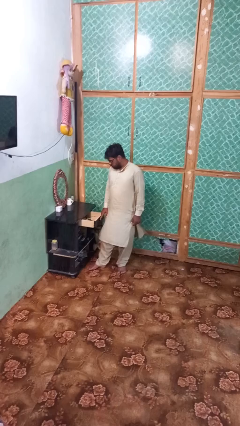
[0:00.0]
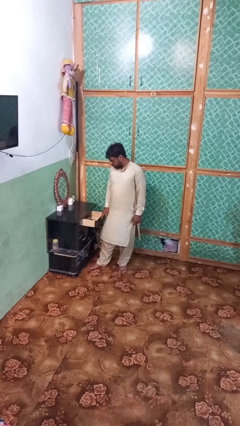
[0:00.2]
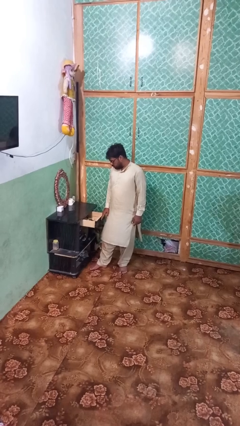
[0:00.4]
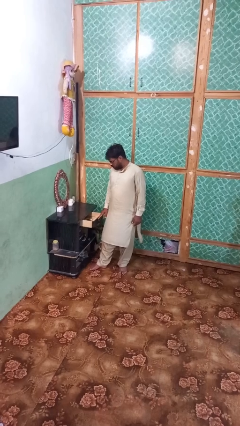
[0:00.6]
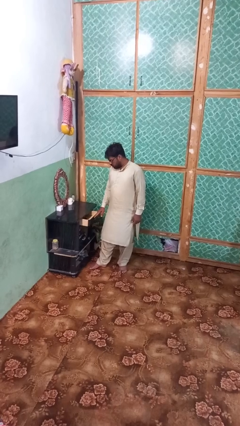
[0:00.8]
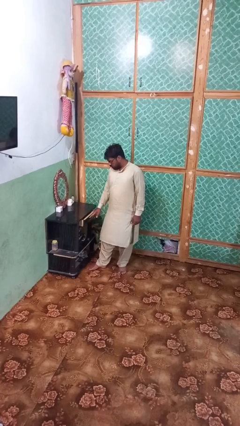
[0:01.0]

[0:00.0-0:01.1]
person closes dresser drawer

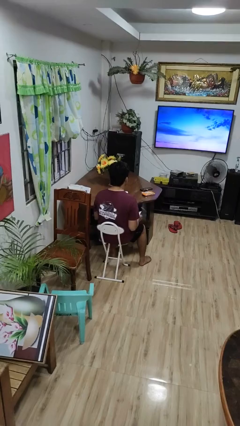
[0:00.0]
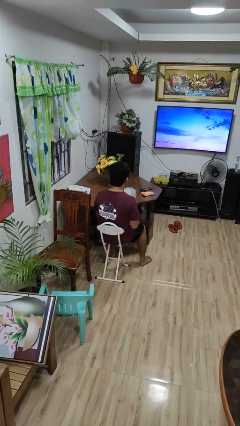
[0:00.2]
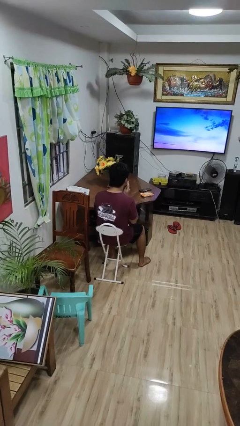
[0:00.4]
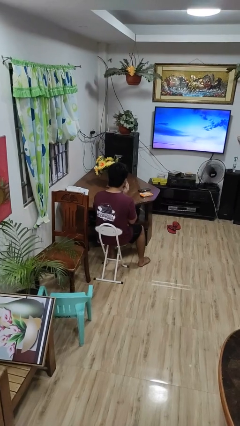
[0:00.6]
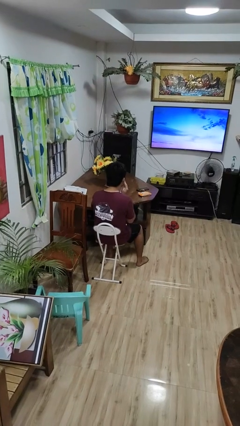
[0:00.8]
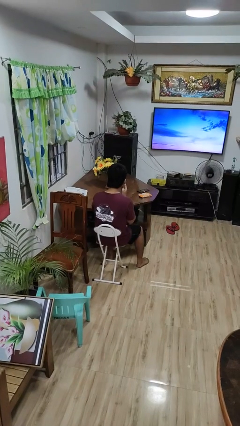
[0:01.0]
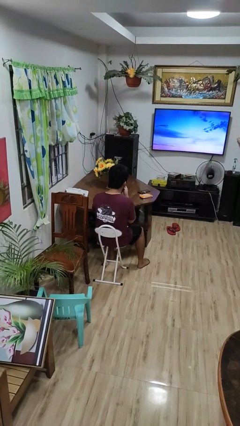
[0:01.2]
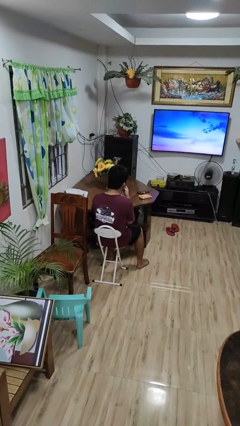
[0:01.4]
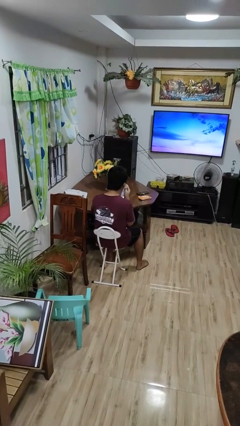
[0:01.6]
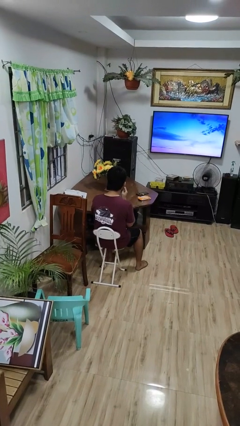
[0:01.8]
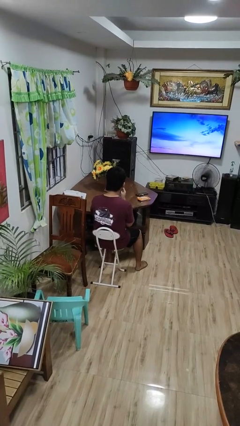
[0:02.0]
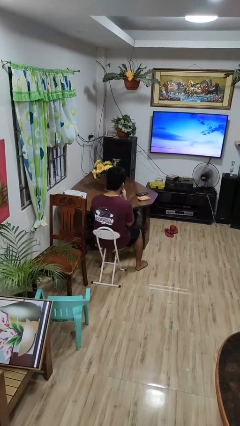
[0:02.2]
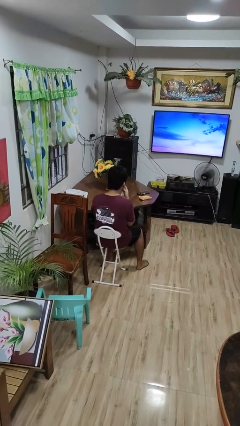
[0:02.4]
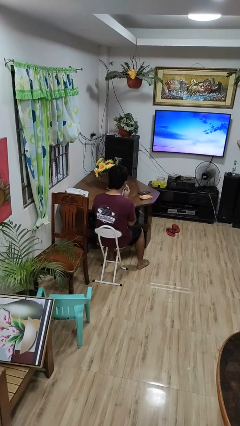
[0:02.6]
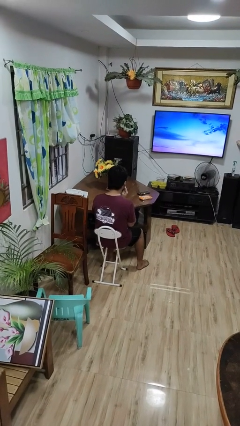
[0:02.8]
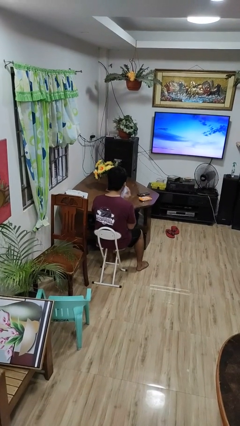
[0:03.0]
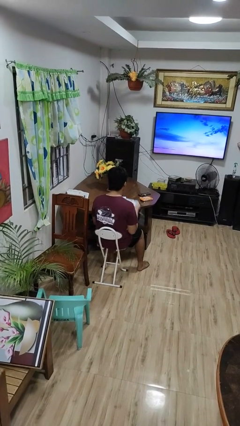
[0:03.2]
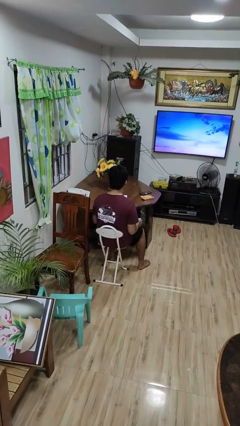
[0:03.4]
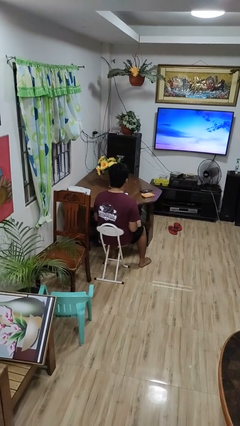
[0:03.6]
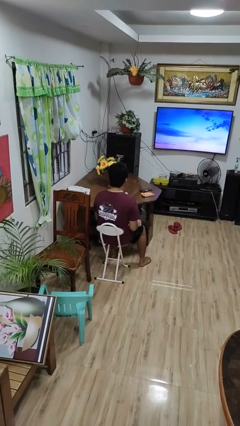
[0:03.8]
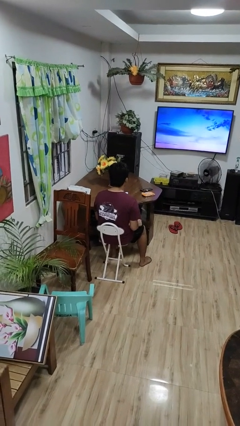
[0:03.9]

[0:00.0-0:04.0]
person wipes mouth with napkin

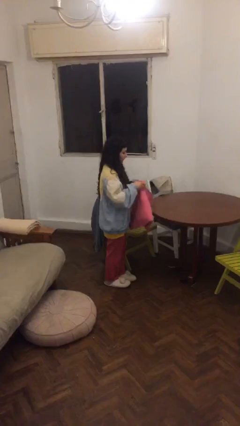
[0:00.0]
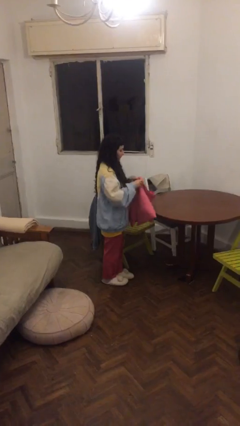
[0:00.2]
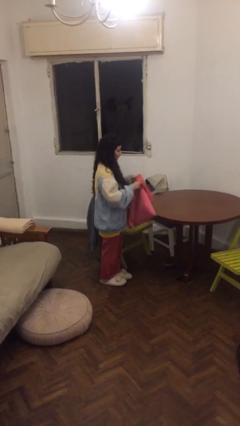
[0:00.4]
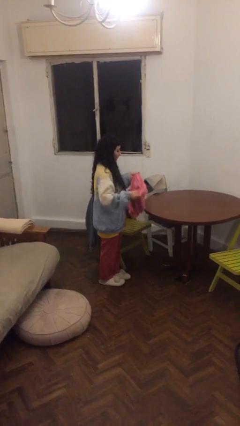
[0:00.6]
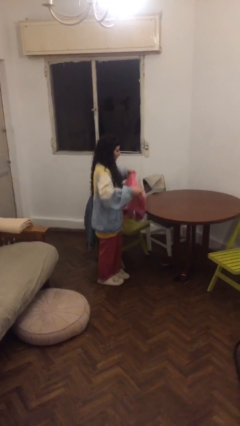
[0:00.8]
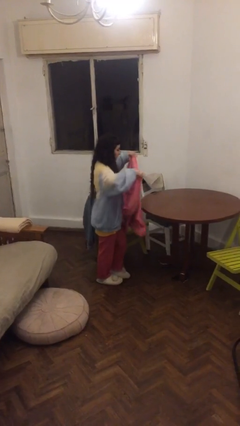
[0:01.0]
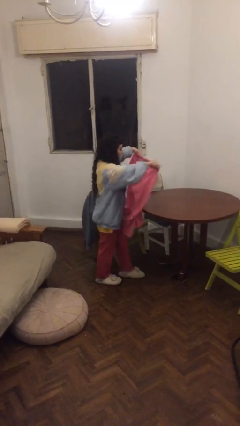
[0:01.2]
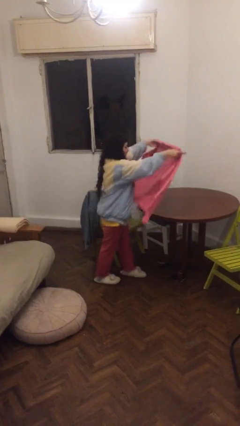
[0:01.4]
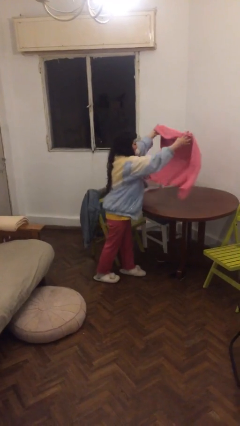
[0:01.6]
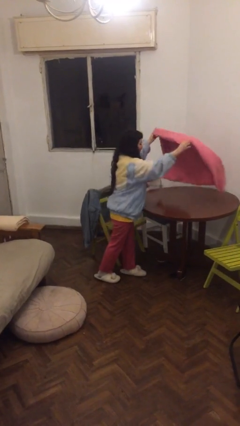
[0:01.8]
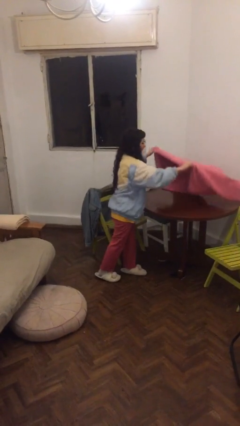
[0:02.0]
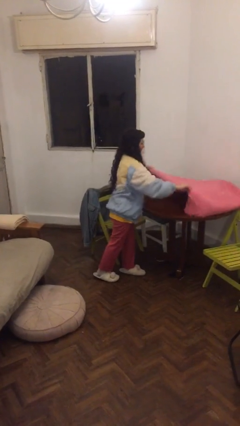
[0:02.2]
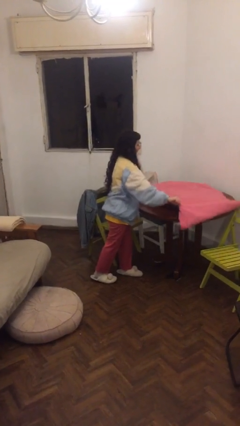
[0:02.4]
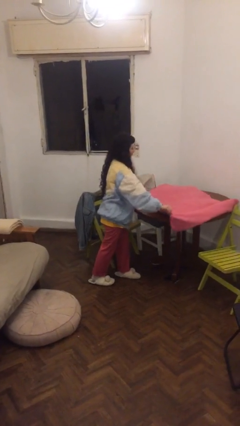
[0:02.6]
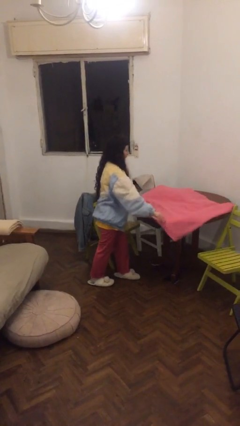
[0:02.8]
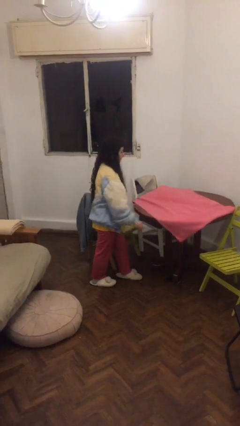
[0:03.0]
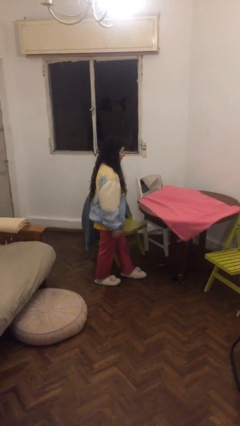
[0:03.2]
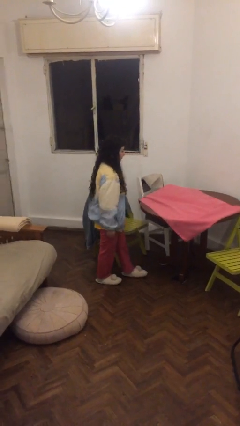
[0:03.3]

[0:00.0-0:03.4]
person spreads tablecloth

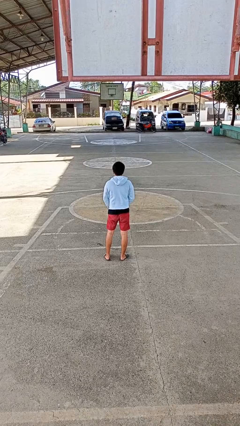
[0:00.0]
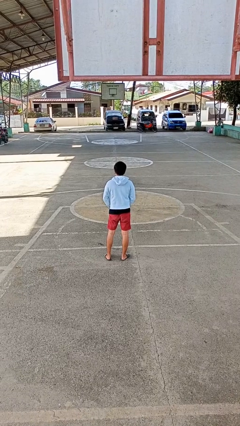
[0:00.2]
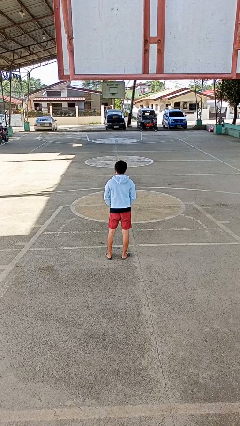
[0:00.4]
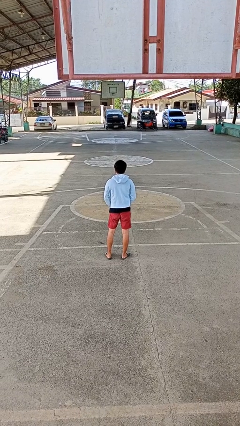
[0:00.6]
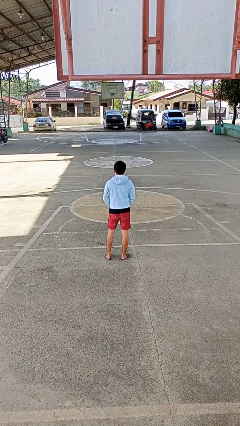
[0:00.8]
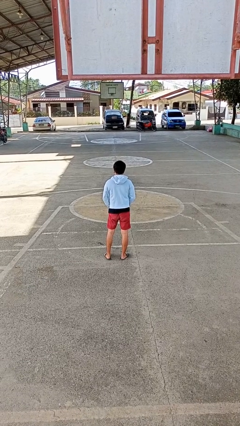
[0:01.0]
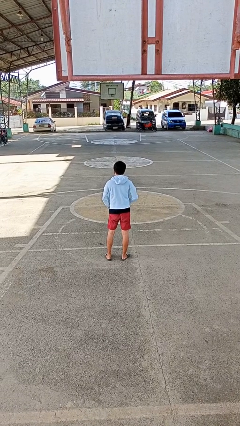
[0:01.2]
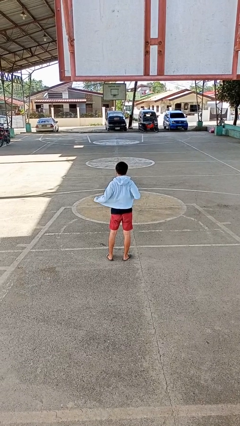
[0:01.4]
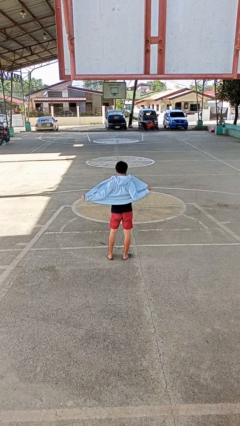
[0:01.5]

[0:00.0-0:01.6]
person unzips jacket

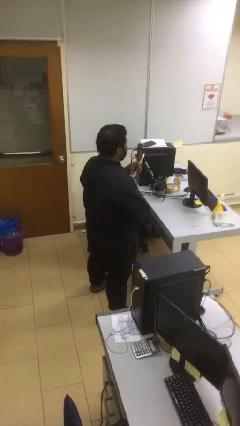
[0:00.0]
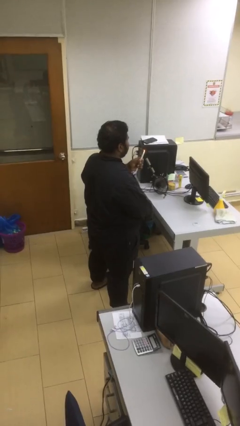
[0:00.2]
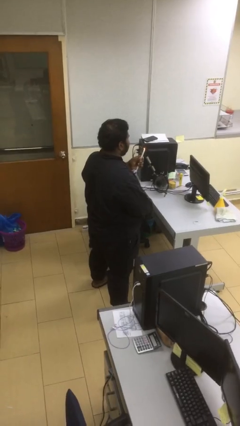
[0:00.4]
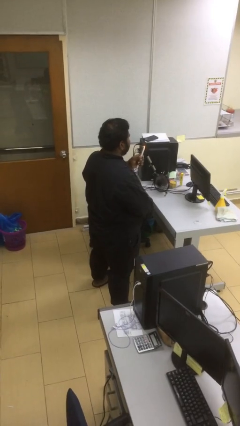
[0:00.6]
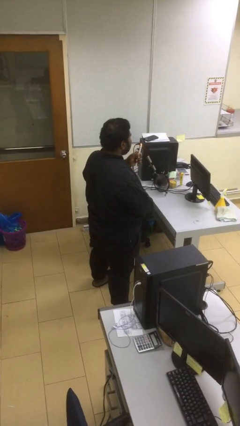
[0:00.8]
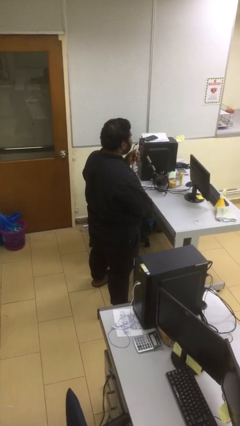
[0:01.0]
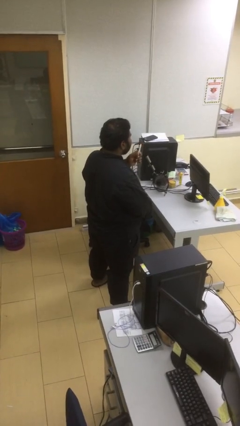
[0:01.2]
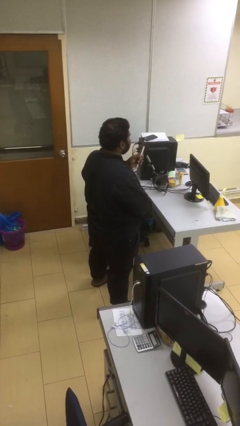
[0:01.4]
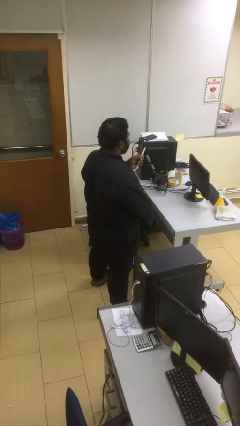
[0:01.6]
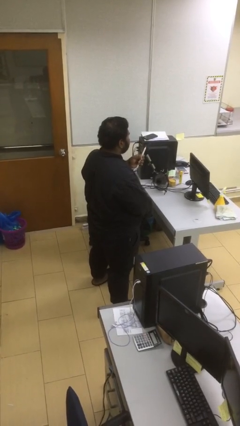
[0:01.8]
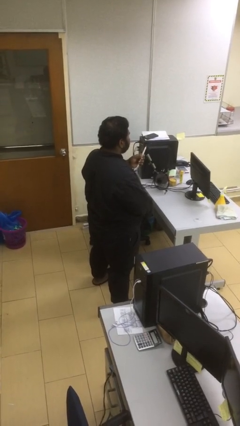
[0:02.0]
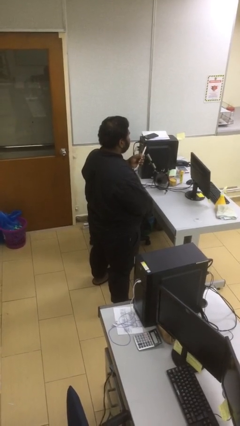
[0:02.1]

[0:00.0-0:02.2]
person extinguishes candle

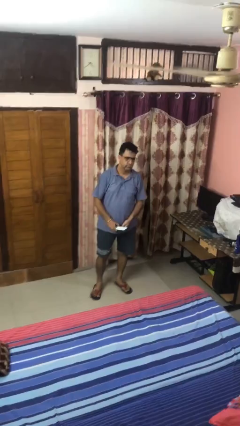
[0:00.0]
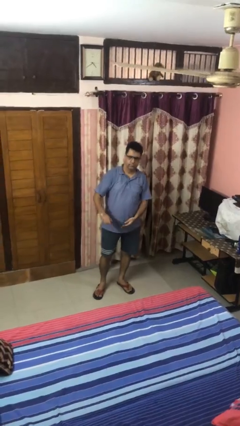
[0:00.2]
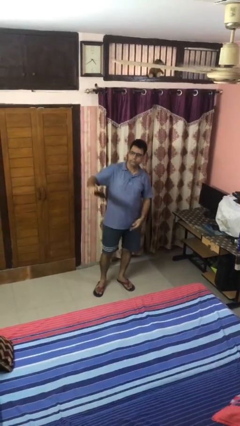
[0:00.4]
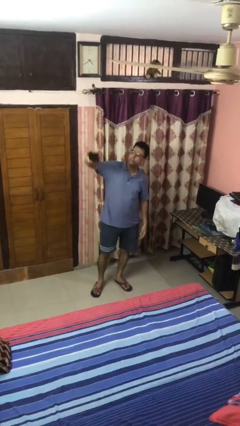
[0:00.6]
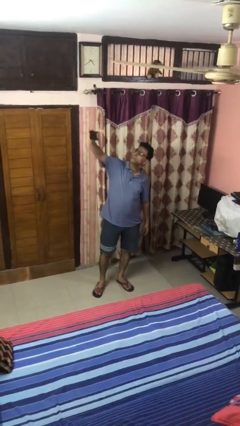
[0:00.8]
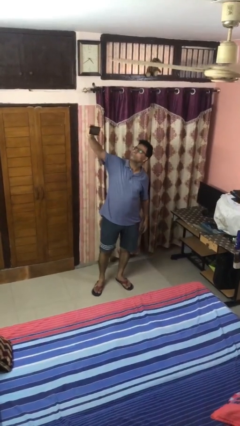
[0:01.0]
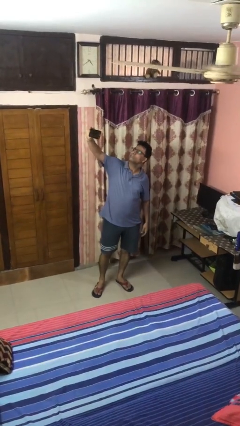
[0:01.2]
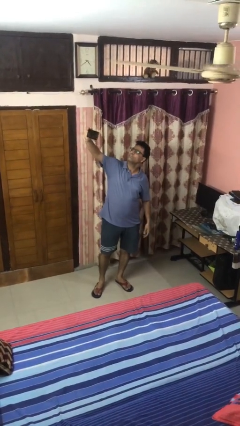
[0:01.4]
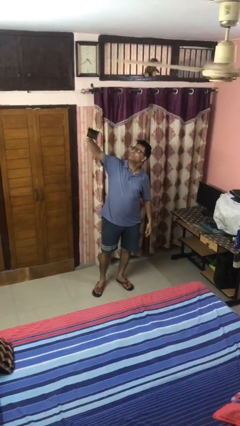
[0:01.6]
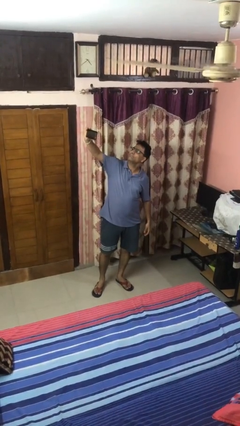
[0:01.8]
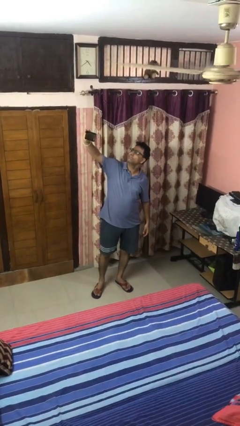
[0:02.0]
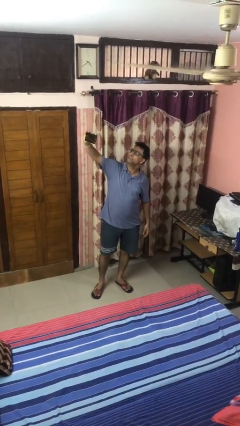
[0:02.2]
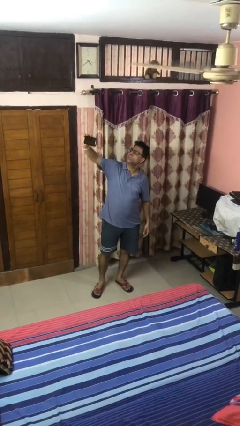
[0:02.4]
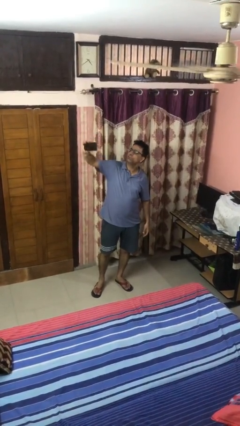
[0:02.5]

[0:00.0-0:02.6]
person takes selfie

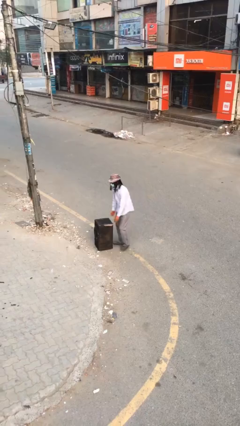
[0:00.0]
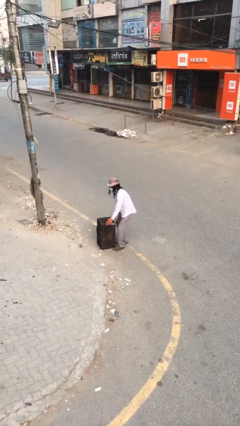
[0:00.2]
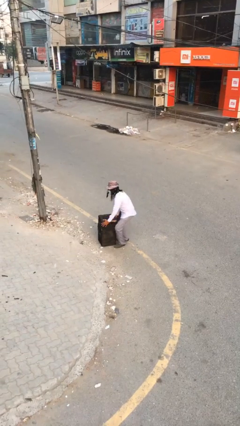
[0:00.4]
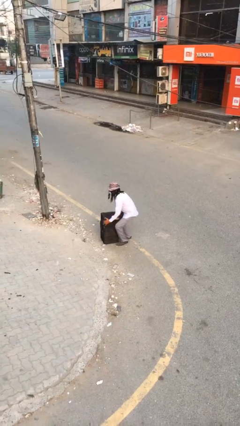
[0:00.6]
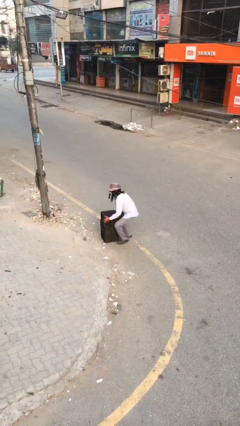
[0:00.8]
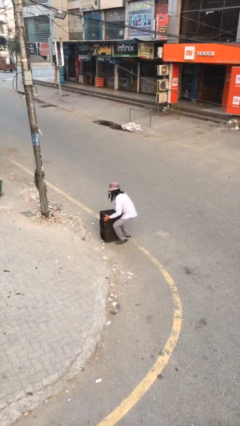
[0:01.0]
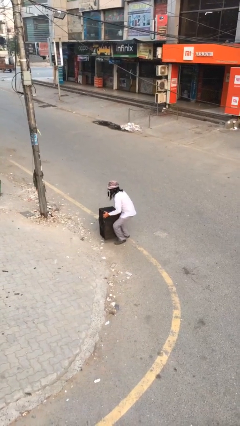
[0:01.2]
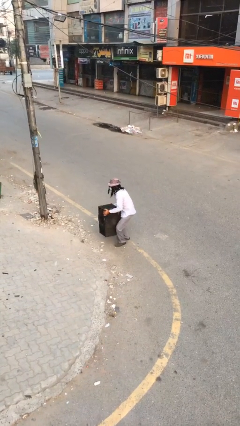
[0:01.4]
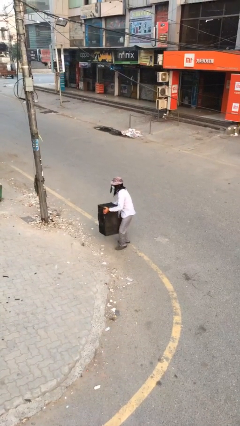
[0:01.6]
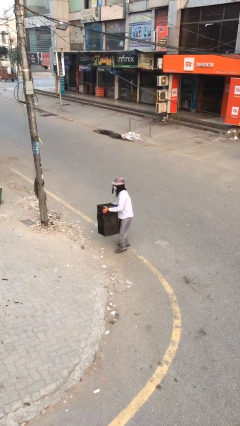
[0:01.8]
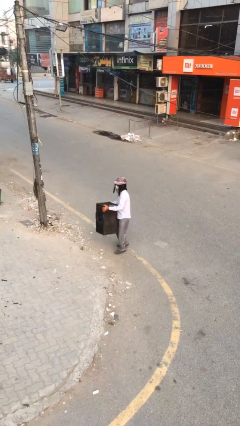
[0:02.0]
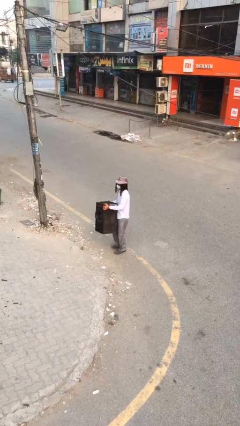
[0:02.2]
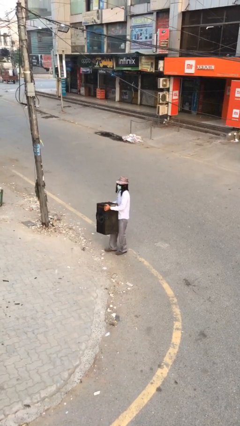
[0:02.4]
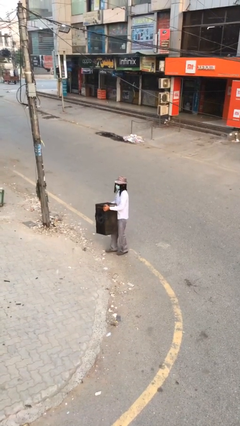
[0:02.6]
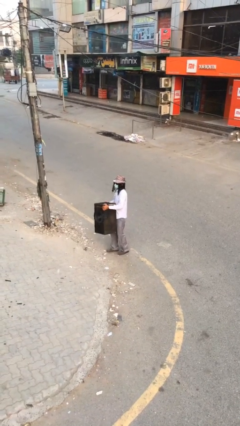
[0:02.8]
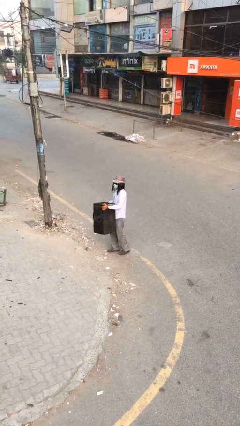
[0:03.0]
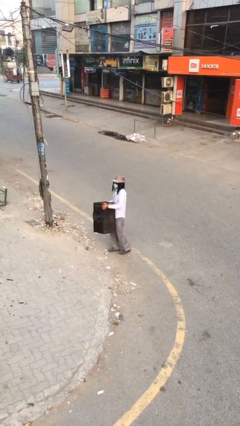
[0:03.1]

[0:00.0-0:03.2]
person picks up object from floor
